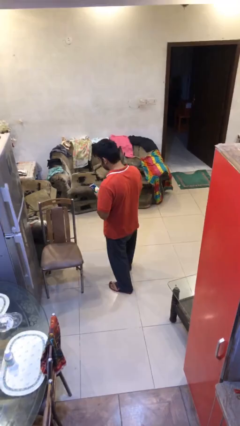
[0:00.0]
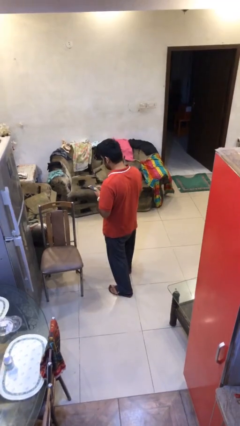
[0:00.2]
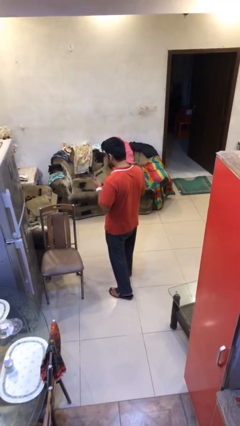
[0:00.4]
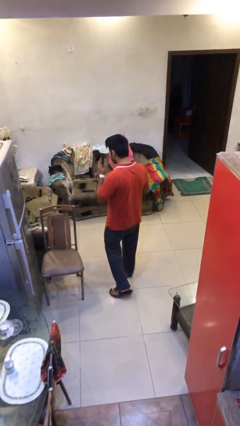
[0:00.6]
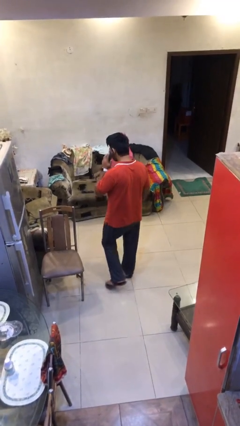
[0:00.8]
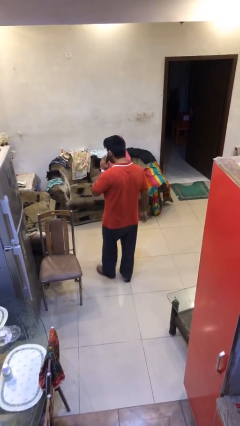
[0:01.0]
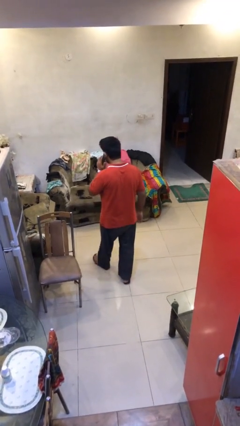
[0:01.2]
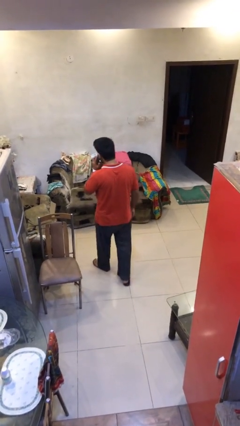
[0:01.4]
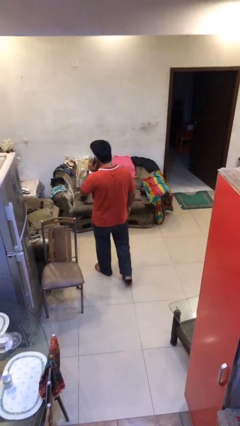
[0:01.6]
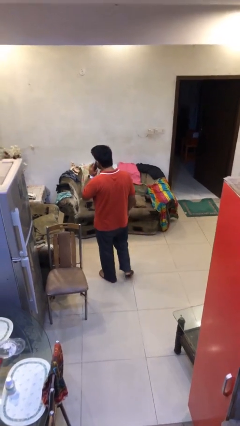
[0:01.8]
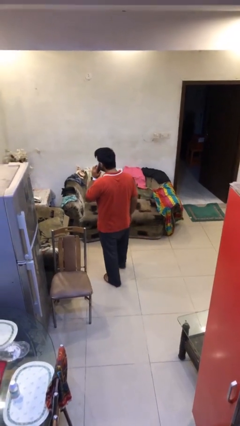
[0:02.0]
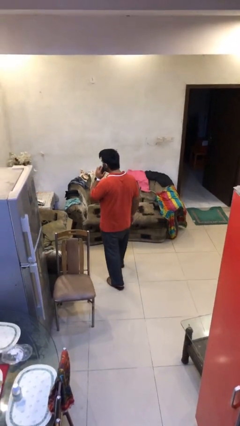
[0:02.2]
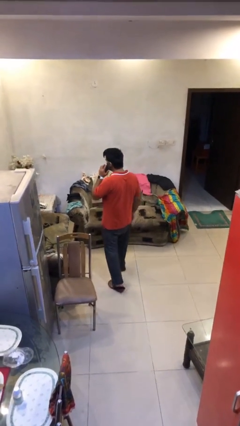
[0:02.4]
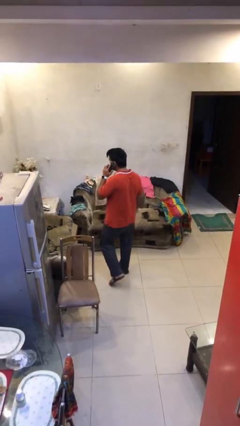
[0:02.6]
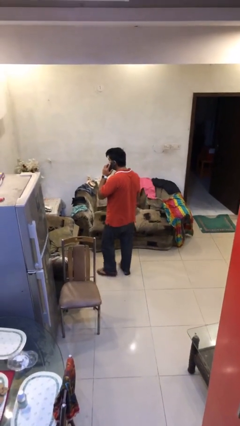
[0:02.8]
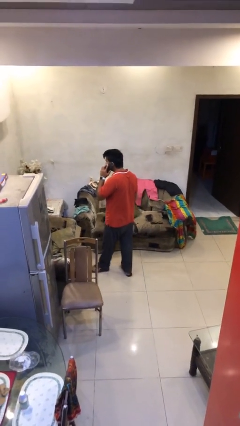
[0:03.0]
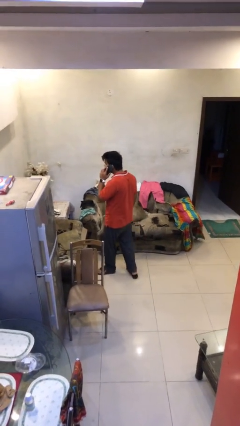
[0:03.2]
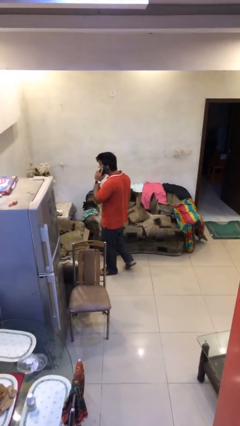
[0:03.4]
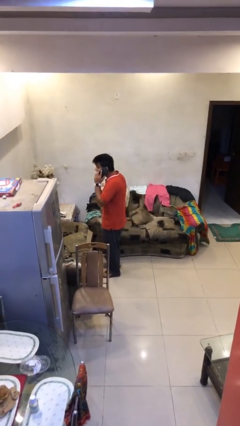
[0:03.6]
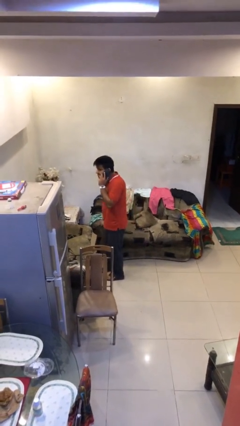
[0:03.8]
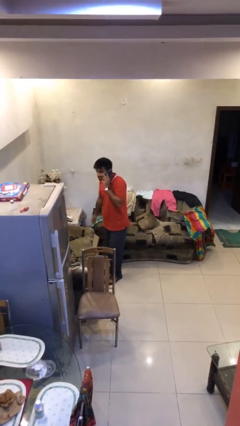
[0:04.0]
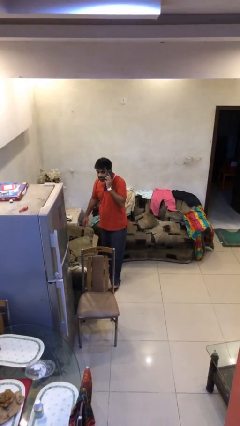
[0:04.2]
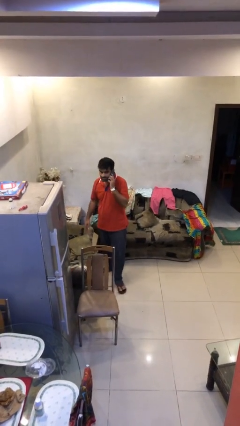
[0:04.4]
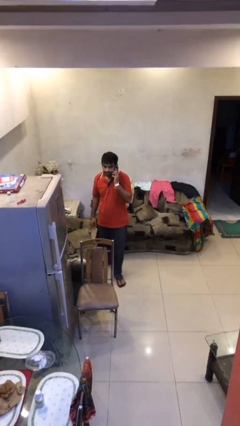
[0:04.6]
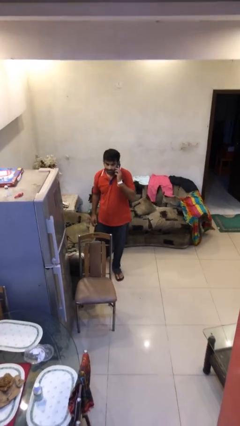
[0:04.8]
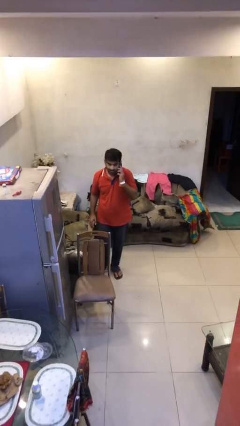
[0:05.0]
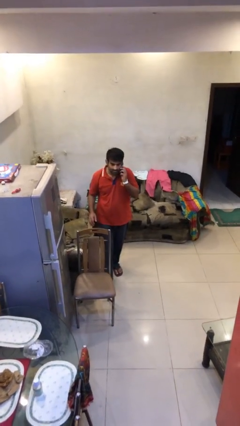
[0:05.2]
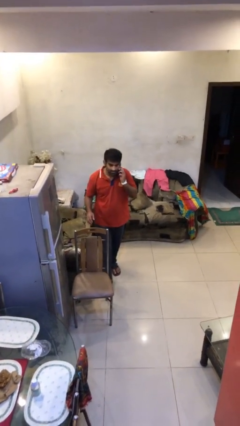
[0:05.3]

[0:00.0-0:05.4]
person talks on phone

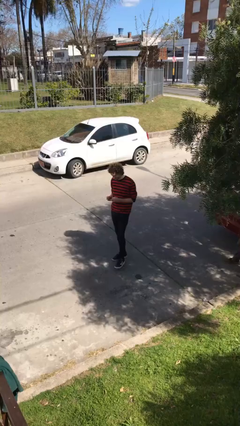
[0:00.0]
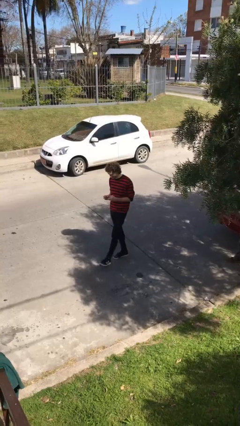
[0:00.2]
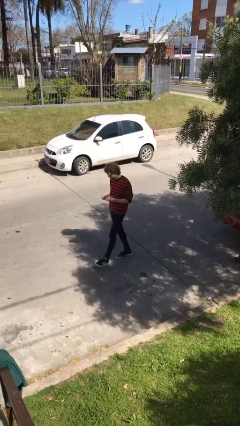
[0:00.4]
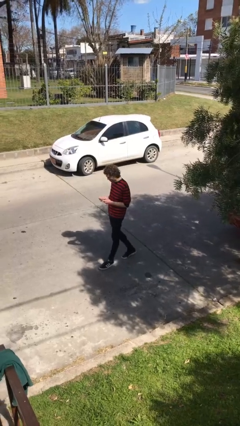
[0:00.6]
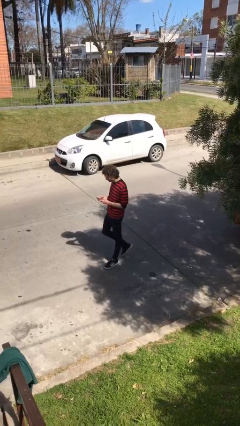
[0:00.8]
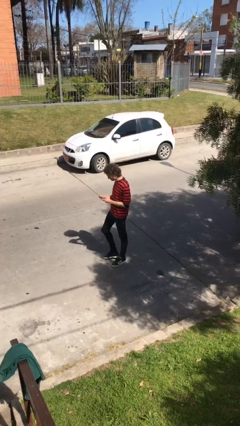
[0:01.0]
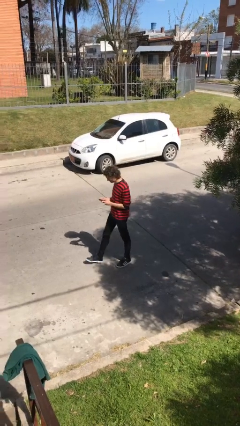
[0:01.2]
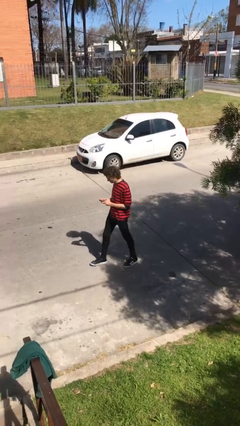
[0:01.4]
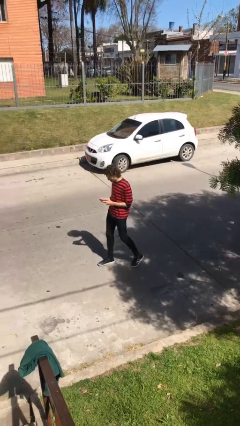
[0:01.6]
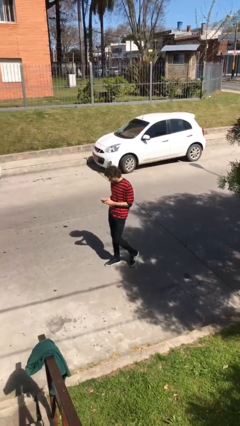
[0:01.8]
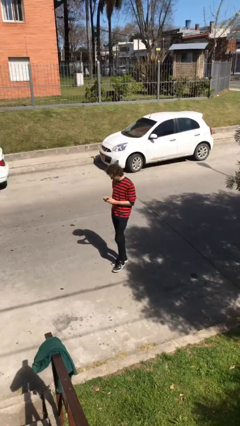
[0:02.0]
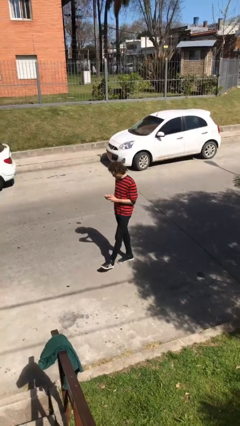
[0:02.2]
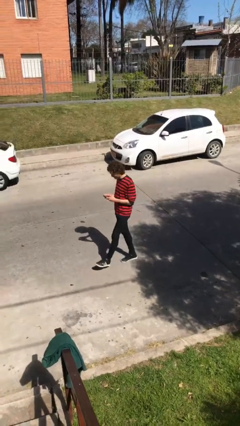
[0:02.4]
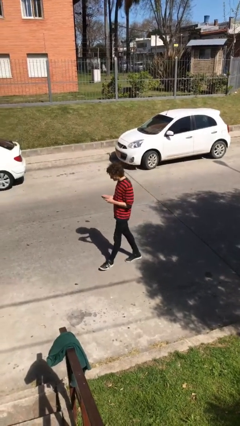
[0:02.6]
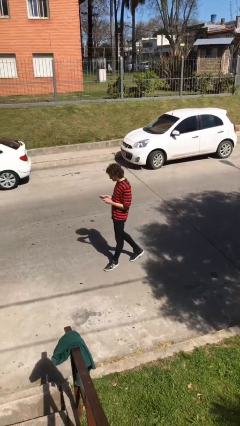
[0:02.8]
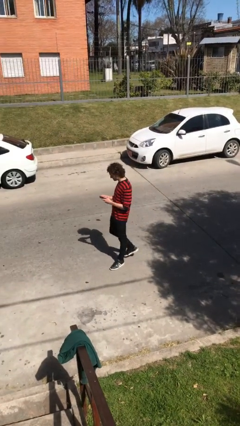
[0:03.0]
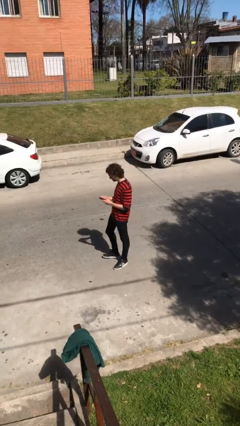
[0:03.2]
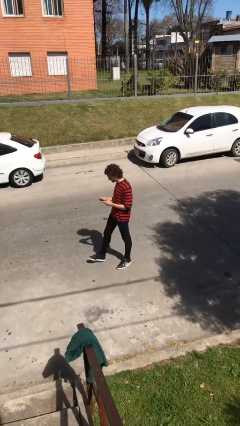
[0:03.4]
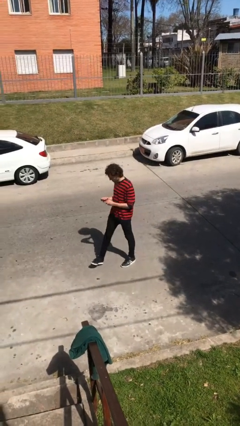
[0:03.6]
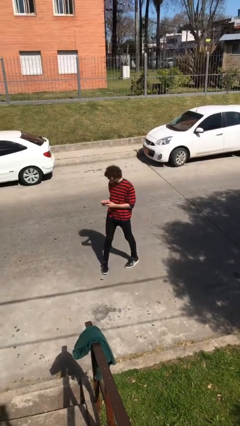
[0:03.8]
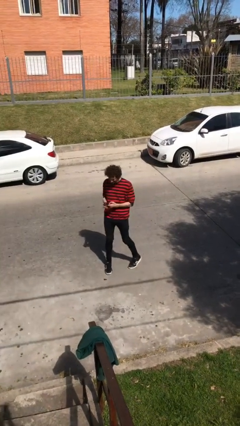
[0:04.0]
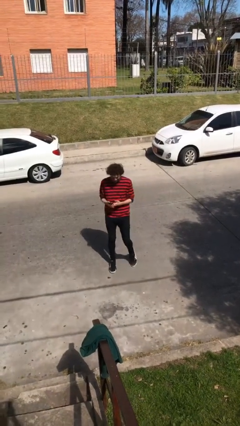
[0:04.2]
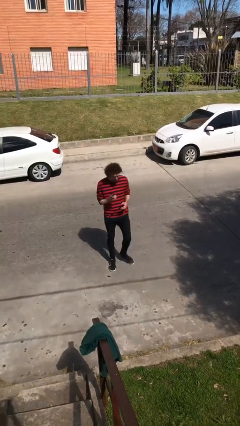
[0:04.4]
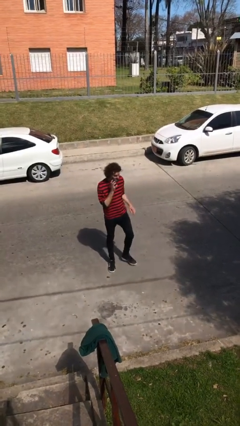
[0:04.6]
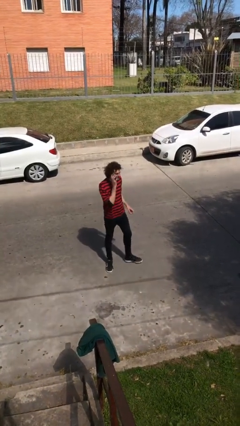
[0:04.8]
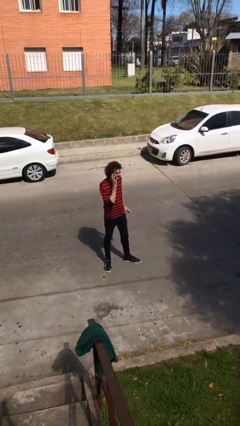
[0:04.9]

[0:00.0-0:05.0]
person texts on phone

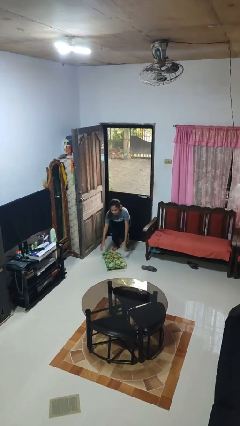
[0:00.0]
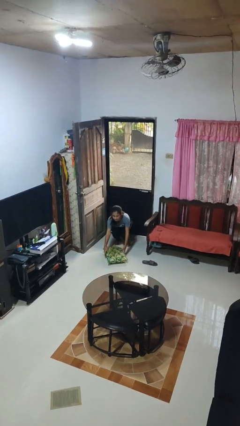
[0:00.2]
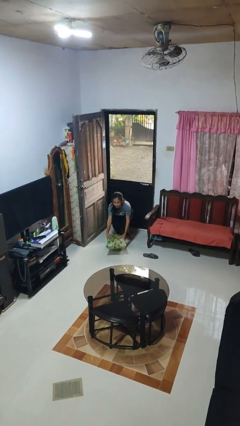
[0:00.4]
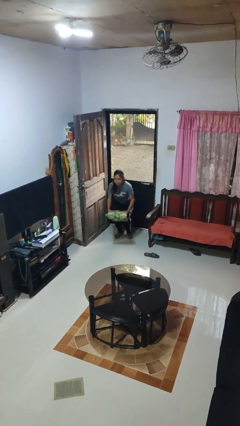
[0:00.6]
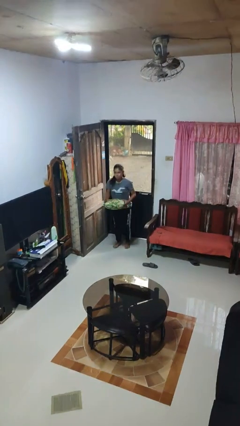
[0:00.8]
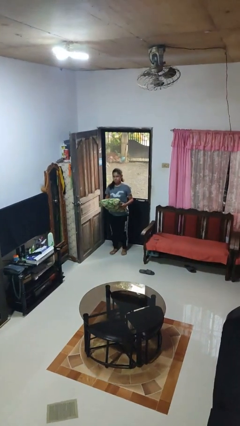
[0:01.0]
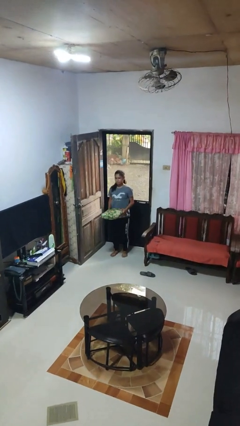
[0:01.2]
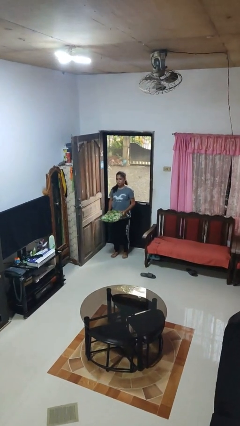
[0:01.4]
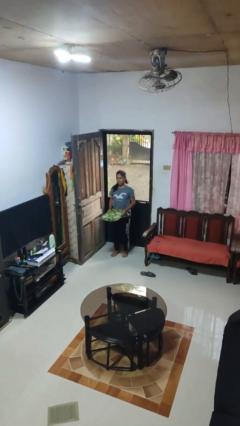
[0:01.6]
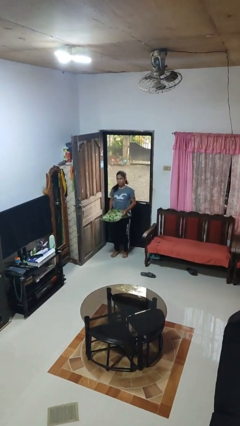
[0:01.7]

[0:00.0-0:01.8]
person picks up object from floor

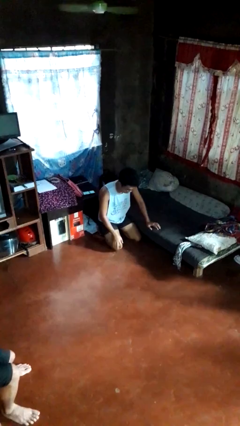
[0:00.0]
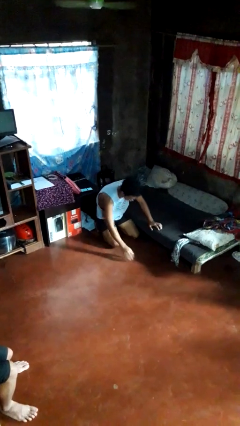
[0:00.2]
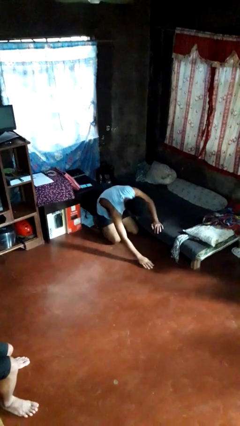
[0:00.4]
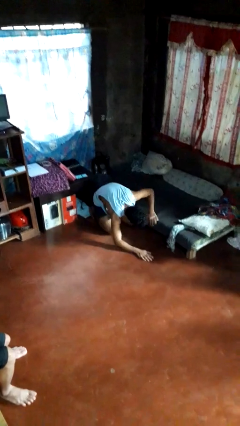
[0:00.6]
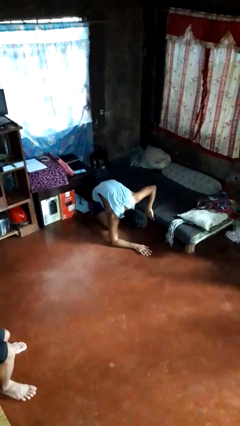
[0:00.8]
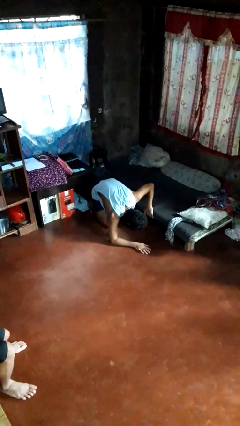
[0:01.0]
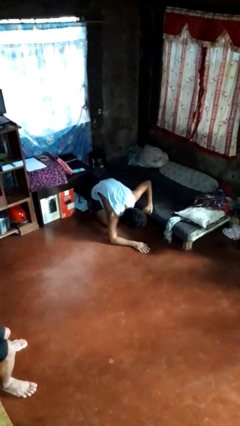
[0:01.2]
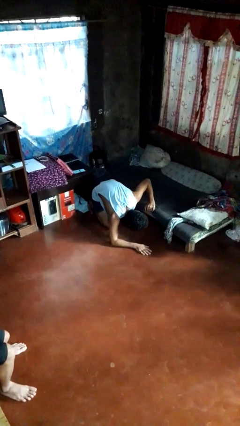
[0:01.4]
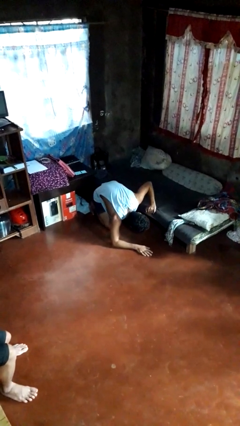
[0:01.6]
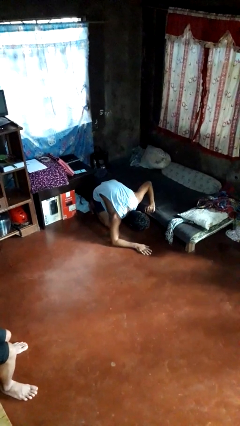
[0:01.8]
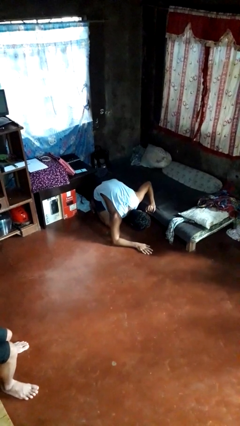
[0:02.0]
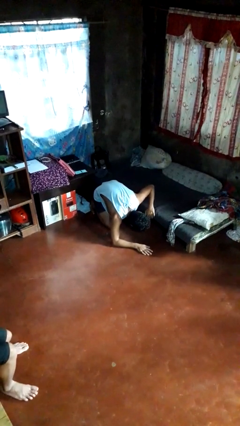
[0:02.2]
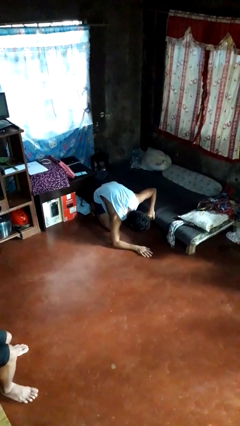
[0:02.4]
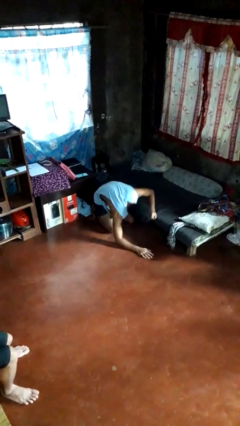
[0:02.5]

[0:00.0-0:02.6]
person searches under bed

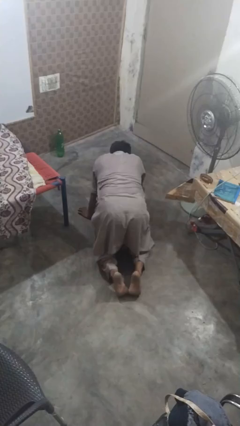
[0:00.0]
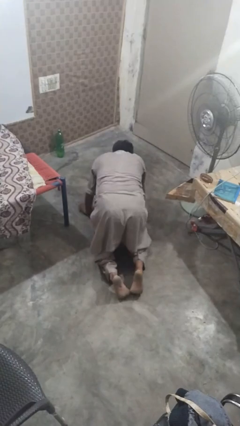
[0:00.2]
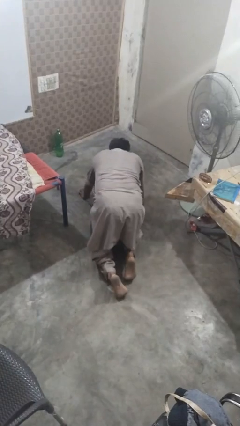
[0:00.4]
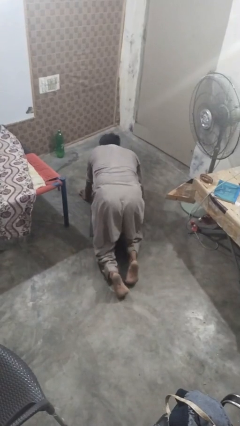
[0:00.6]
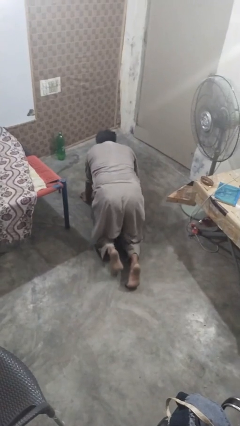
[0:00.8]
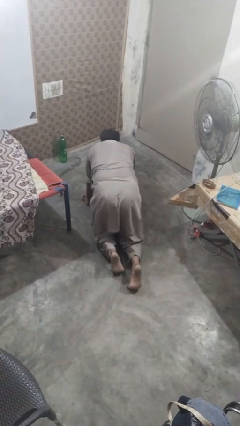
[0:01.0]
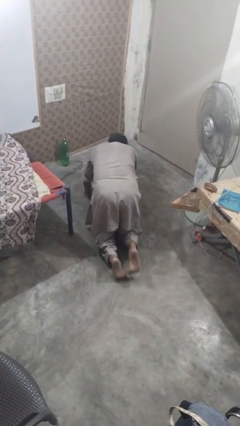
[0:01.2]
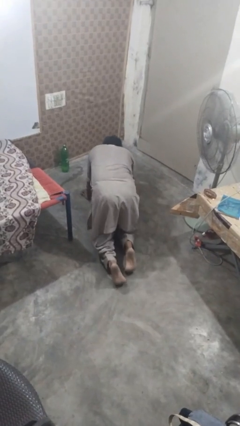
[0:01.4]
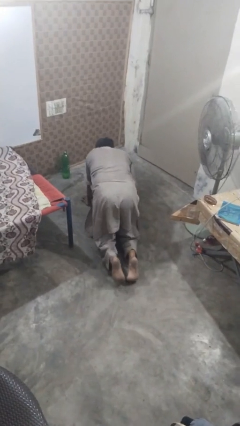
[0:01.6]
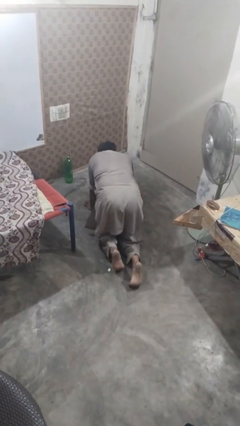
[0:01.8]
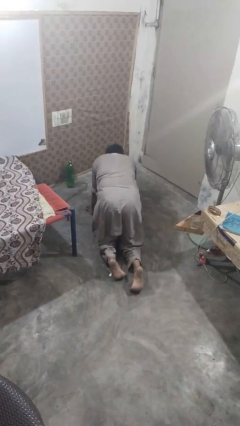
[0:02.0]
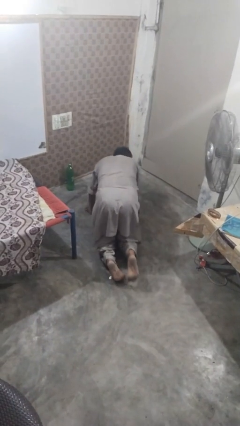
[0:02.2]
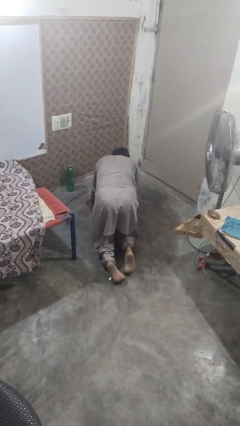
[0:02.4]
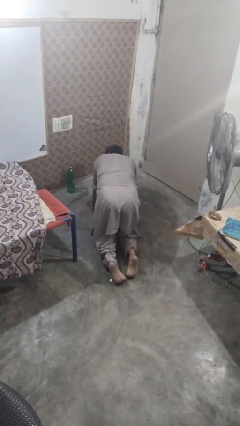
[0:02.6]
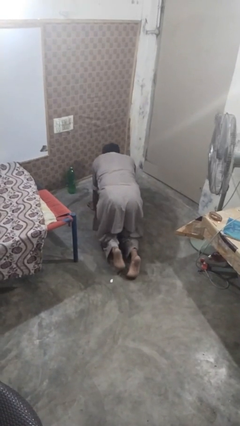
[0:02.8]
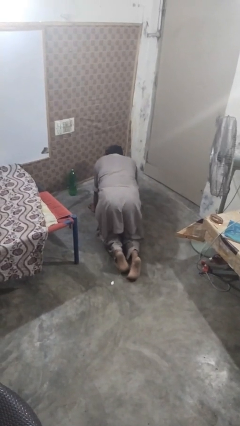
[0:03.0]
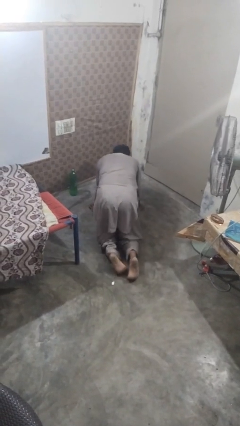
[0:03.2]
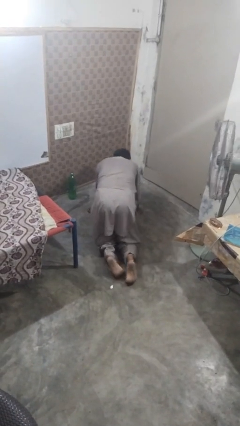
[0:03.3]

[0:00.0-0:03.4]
person crawls
